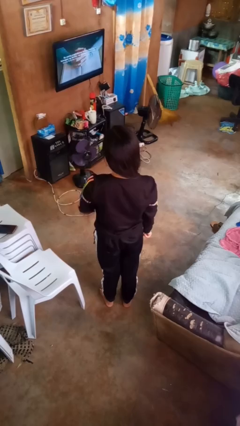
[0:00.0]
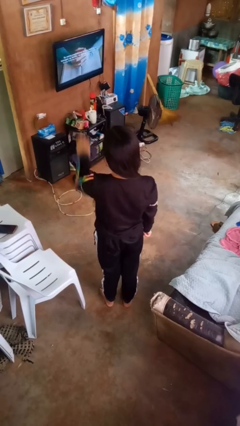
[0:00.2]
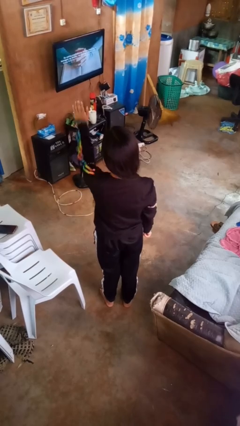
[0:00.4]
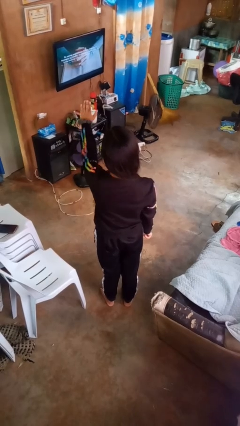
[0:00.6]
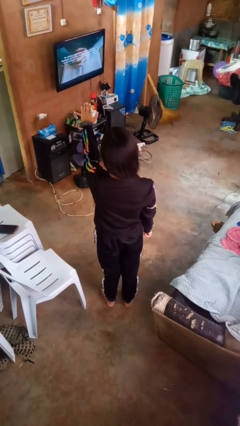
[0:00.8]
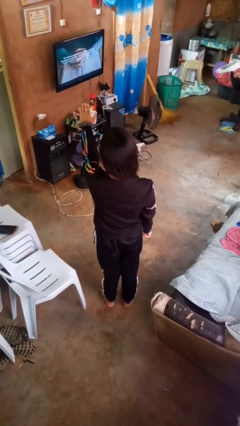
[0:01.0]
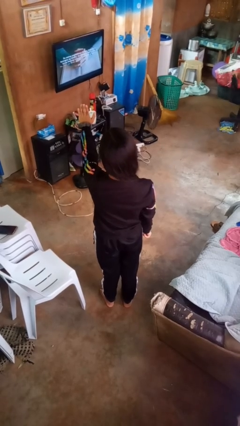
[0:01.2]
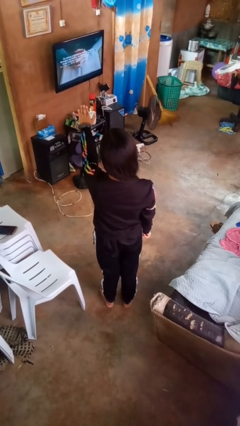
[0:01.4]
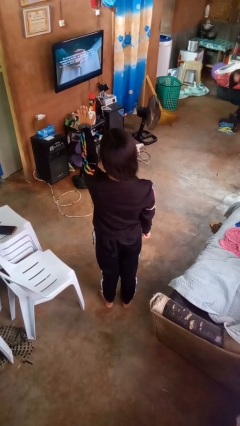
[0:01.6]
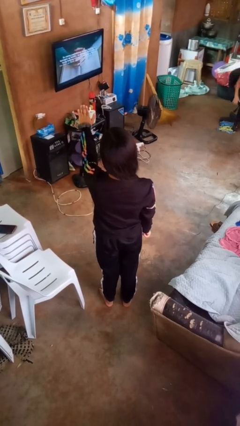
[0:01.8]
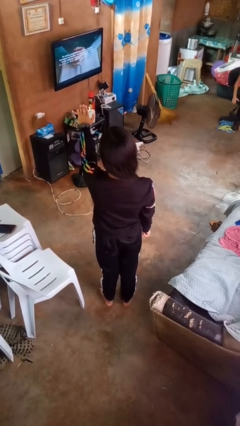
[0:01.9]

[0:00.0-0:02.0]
person gestures stop

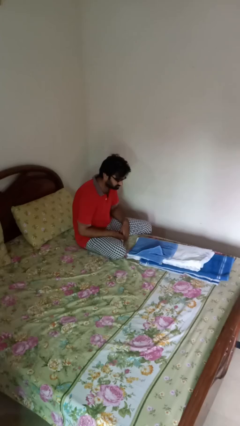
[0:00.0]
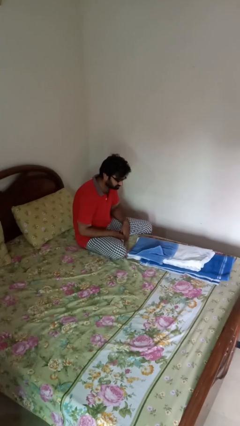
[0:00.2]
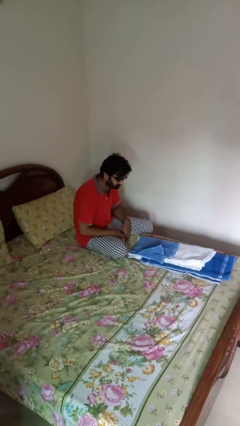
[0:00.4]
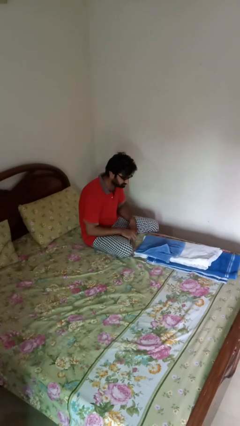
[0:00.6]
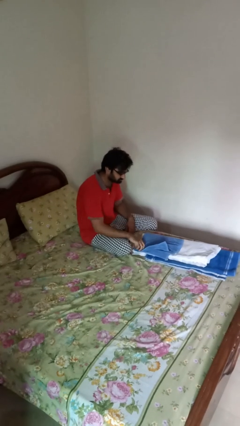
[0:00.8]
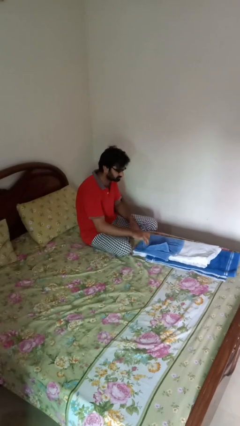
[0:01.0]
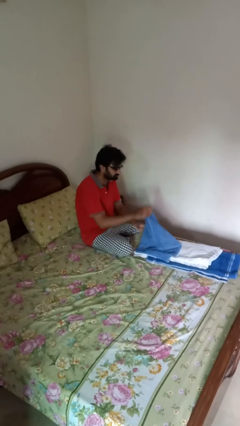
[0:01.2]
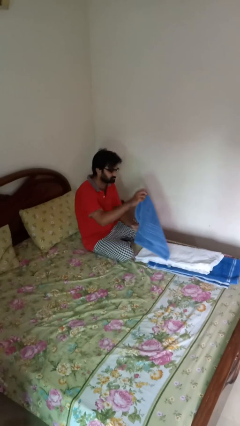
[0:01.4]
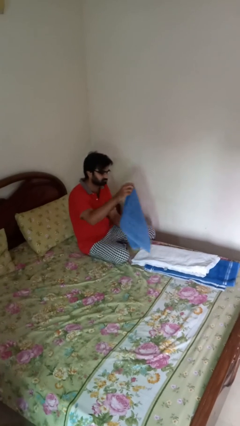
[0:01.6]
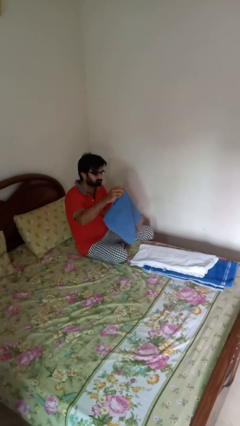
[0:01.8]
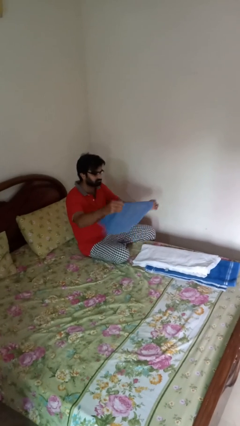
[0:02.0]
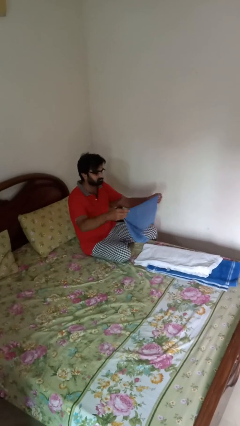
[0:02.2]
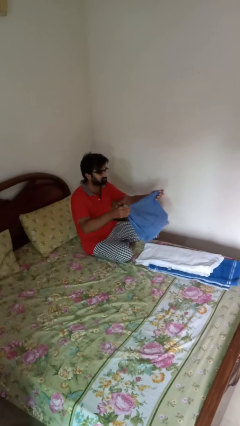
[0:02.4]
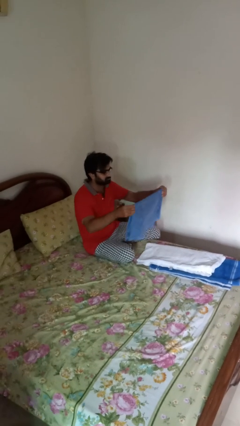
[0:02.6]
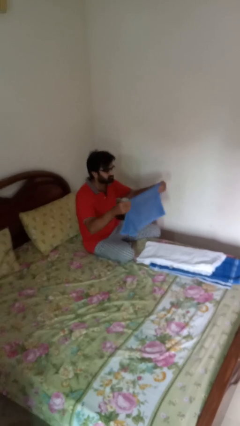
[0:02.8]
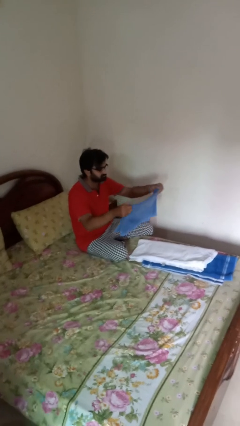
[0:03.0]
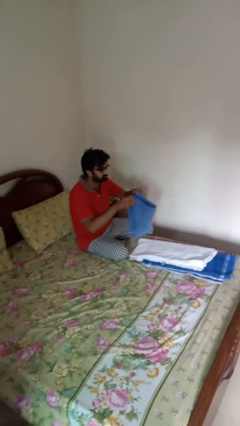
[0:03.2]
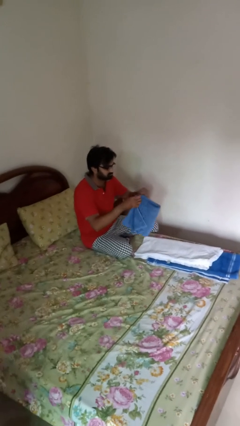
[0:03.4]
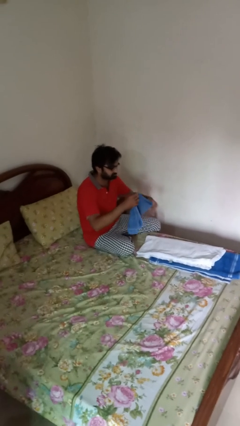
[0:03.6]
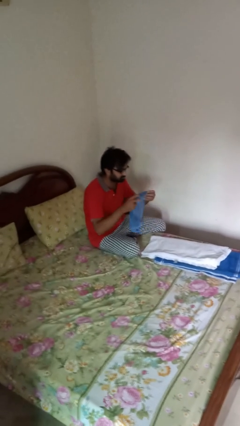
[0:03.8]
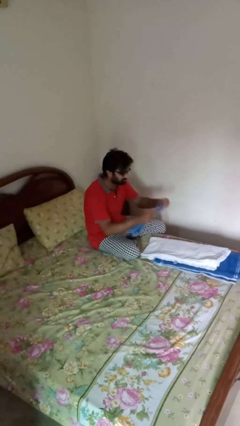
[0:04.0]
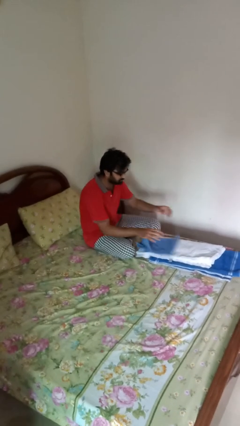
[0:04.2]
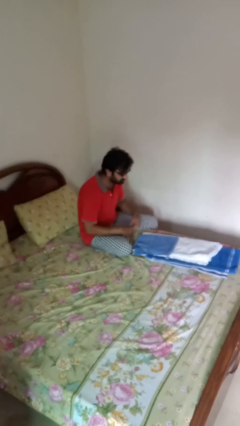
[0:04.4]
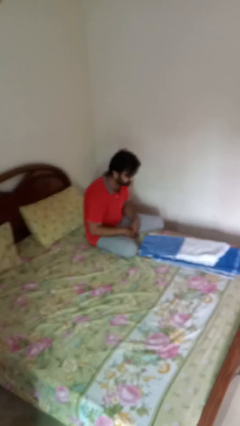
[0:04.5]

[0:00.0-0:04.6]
person folds towel

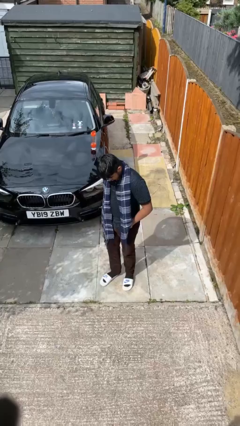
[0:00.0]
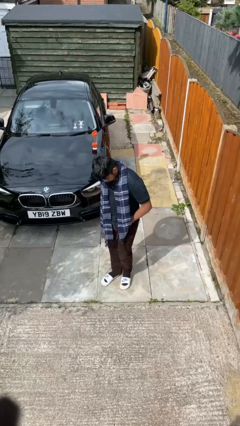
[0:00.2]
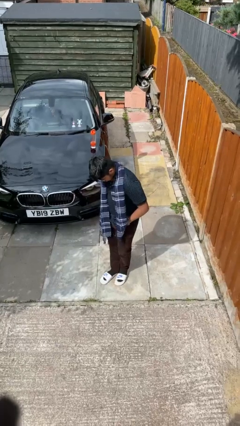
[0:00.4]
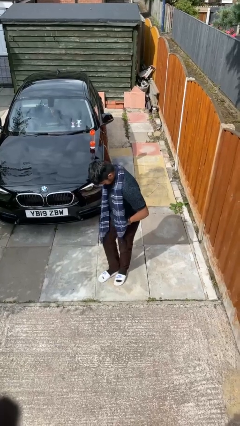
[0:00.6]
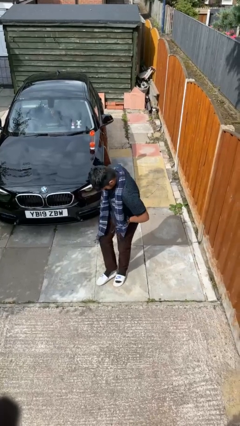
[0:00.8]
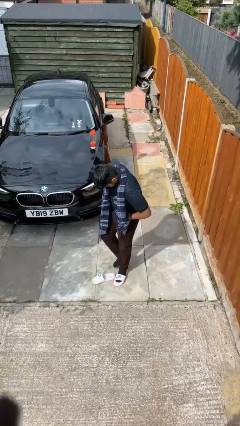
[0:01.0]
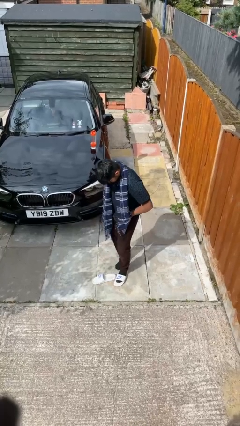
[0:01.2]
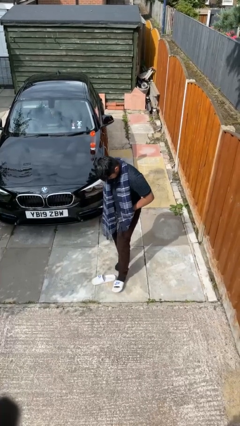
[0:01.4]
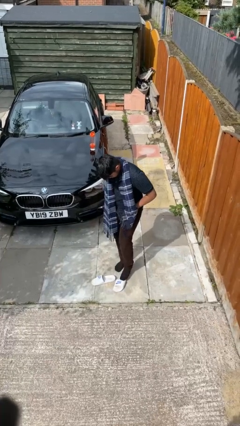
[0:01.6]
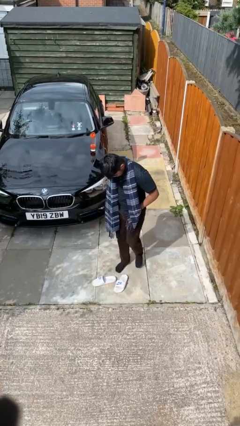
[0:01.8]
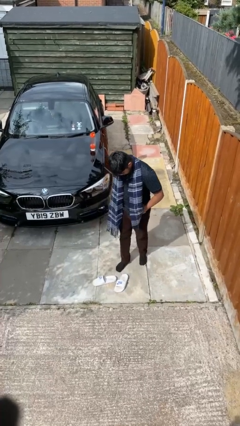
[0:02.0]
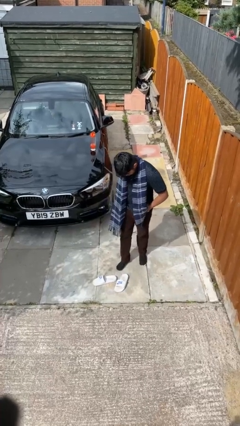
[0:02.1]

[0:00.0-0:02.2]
person takes off shoes

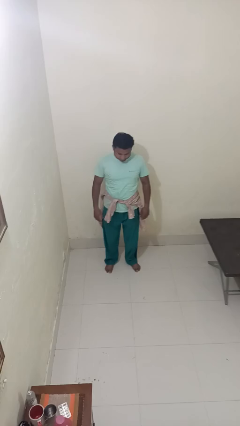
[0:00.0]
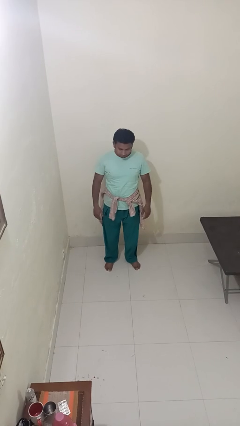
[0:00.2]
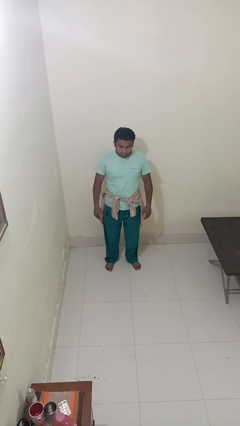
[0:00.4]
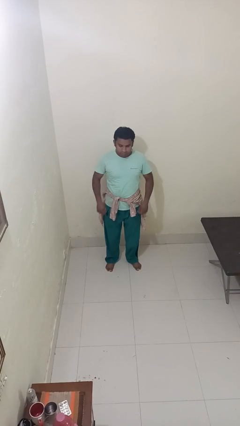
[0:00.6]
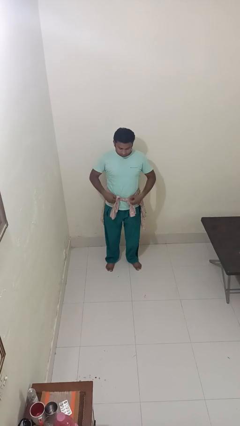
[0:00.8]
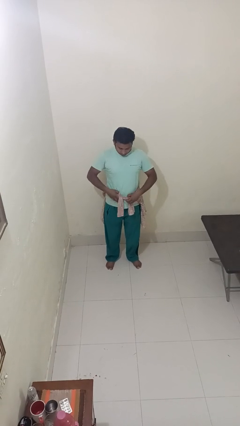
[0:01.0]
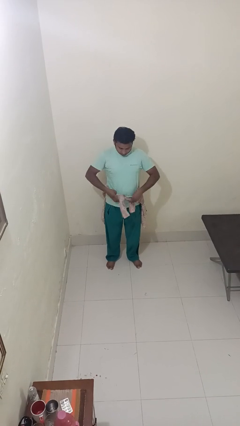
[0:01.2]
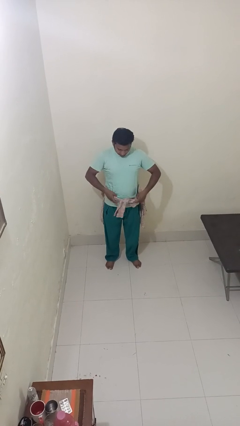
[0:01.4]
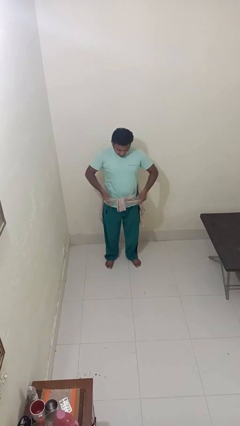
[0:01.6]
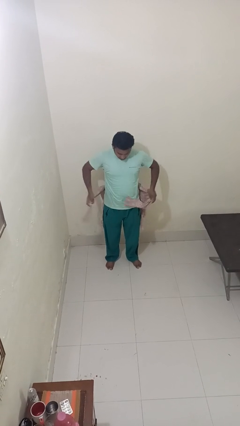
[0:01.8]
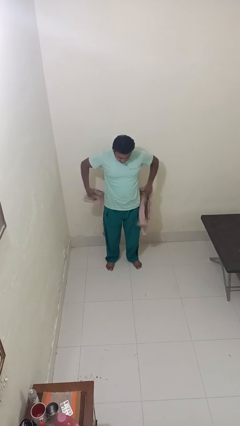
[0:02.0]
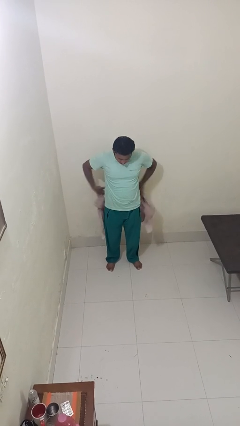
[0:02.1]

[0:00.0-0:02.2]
person unties jacket around waist

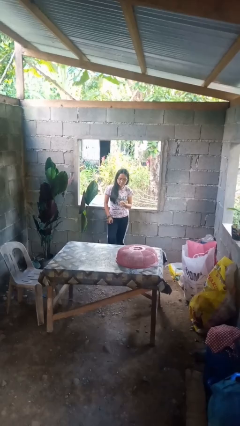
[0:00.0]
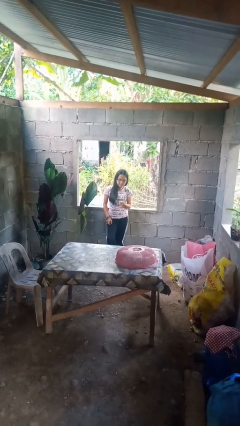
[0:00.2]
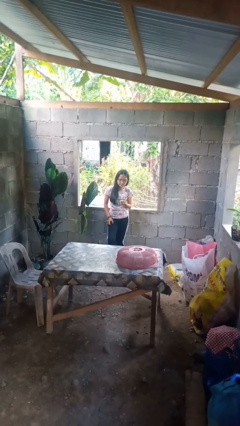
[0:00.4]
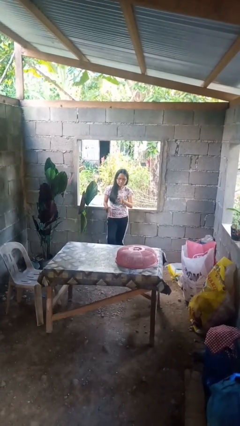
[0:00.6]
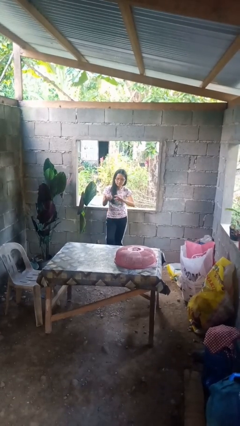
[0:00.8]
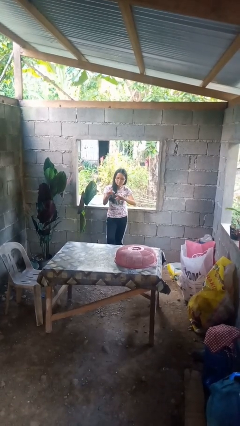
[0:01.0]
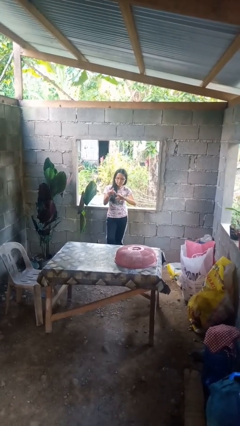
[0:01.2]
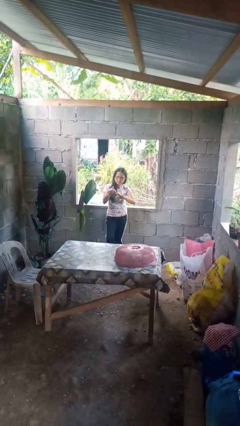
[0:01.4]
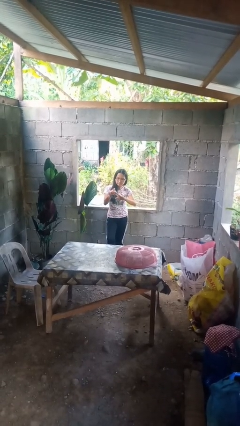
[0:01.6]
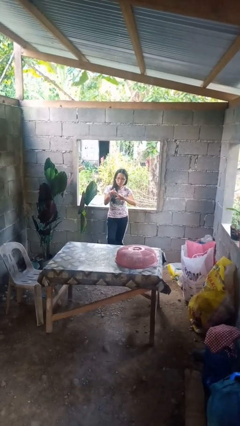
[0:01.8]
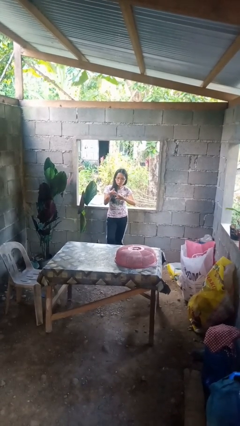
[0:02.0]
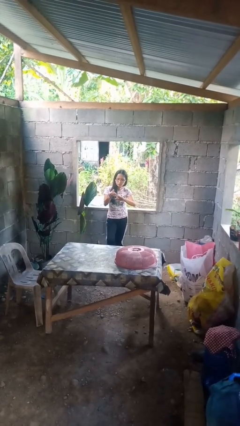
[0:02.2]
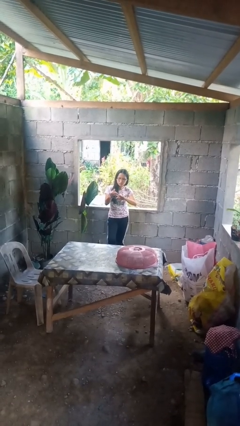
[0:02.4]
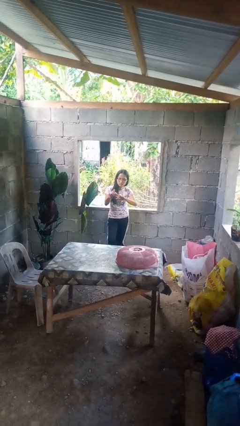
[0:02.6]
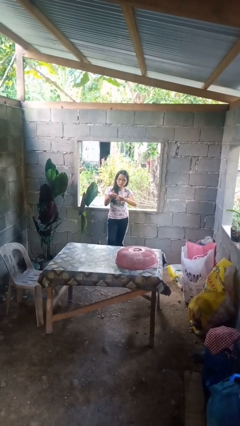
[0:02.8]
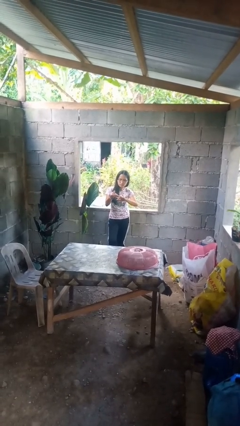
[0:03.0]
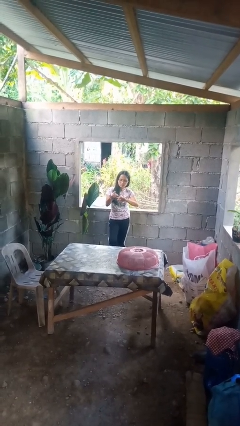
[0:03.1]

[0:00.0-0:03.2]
person clips fingernails

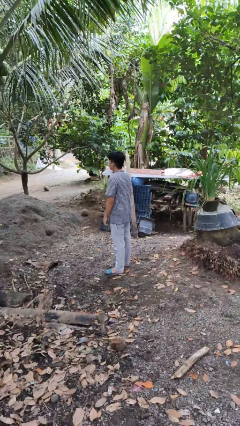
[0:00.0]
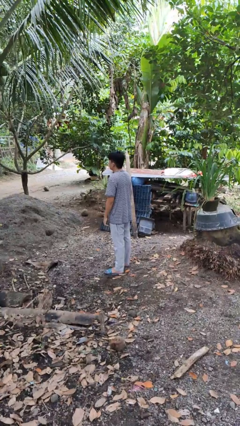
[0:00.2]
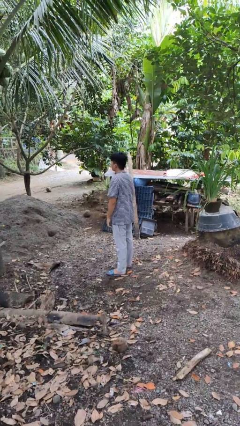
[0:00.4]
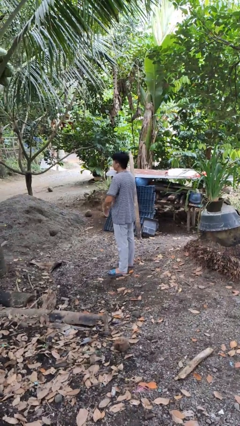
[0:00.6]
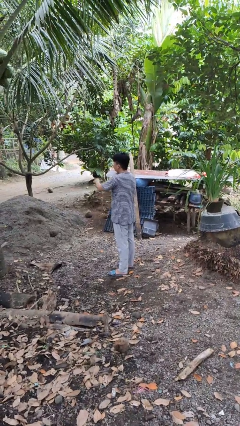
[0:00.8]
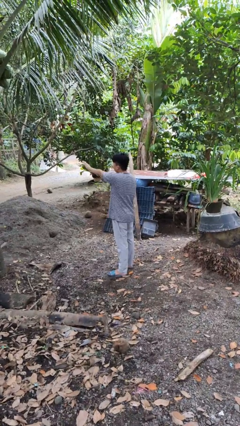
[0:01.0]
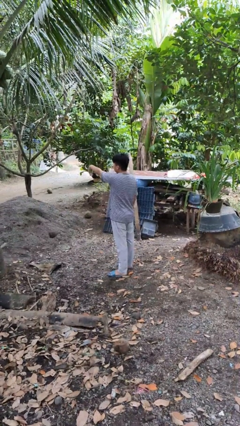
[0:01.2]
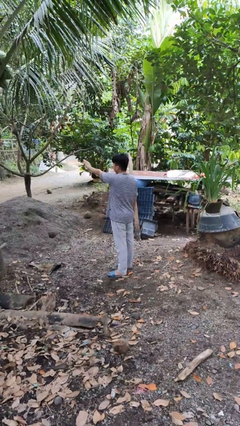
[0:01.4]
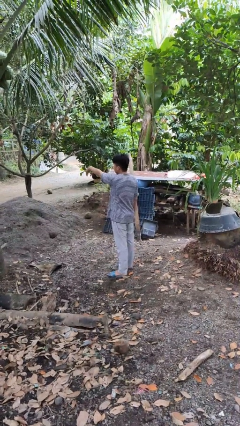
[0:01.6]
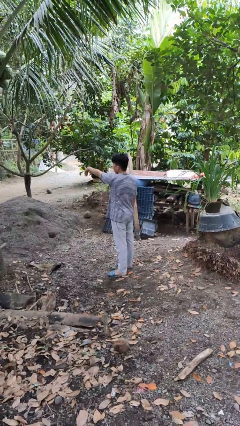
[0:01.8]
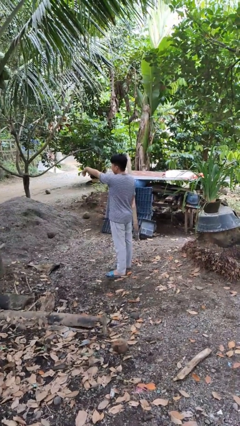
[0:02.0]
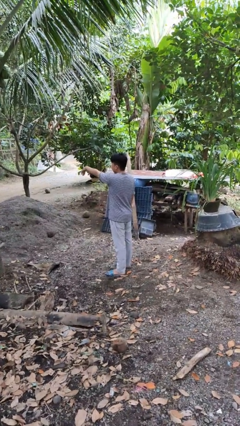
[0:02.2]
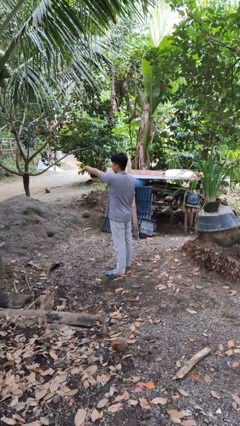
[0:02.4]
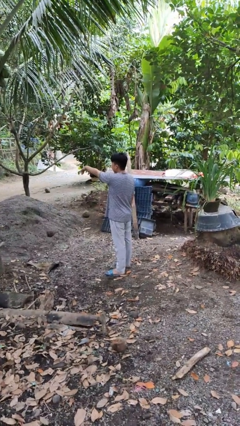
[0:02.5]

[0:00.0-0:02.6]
person gestures come here
